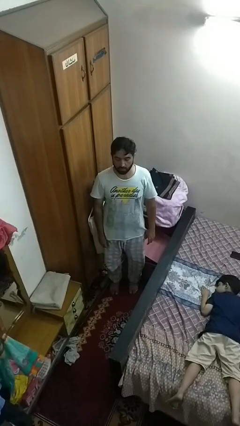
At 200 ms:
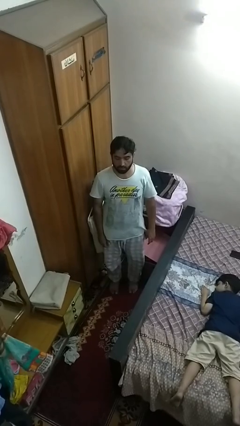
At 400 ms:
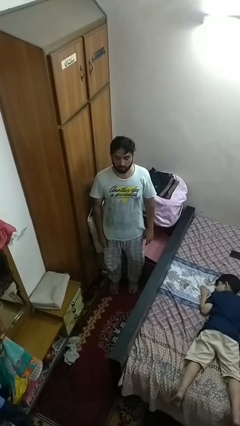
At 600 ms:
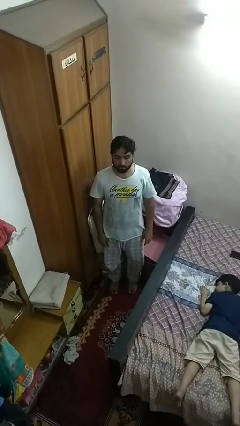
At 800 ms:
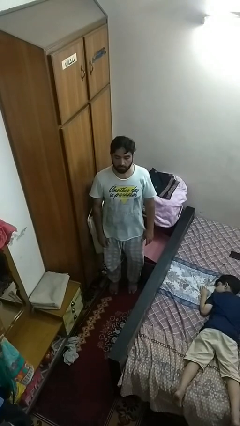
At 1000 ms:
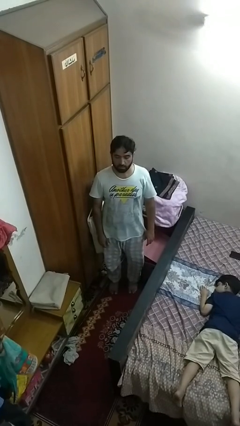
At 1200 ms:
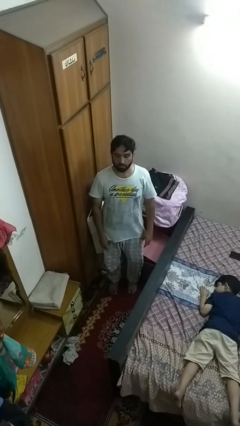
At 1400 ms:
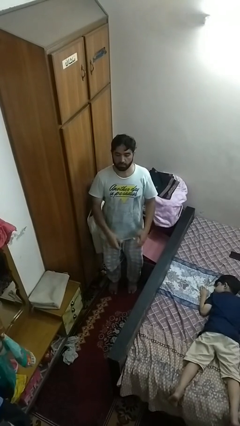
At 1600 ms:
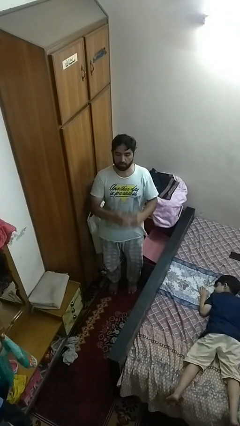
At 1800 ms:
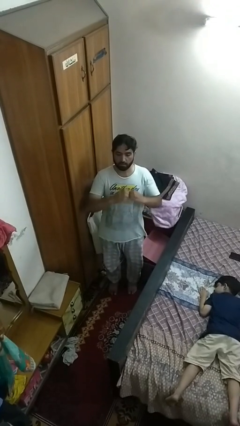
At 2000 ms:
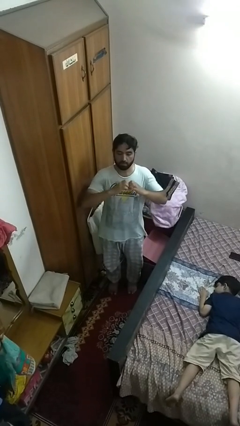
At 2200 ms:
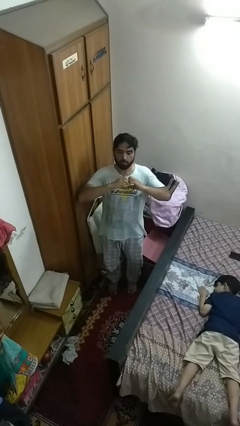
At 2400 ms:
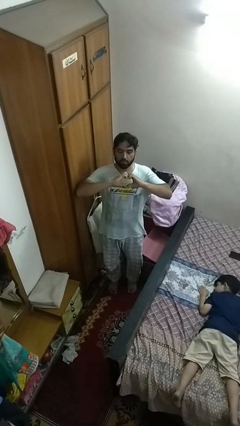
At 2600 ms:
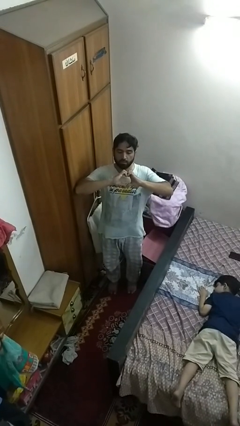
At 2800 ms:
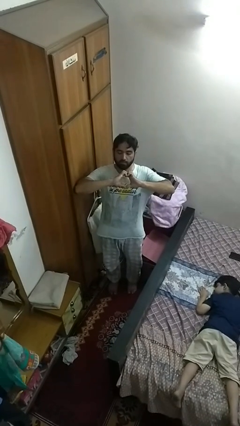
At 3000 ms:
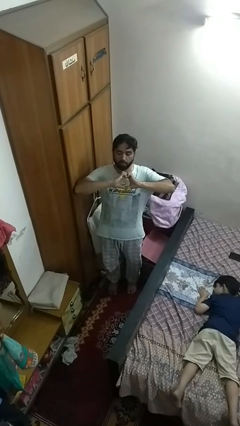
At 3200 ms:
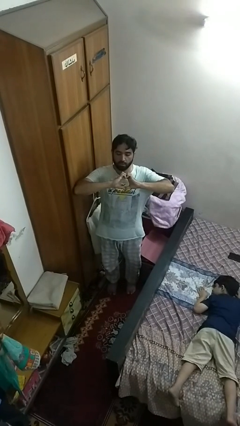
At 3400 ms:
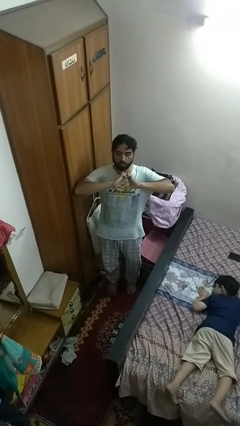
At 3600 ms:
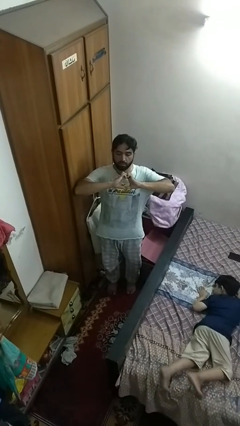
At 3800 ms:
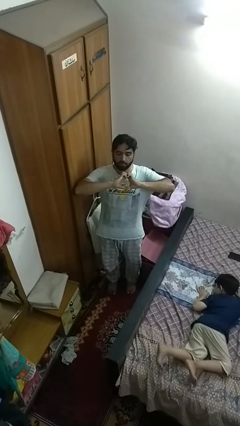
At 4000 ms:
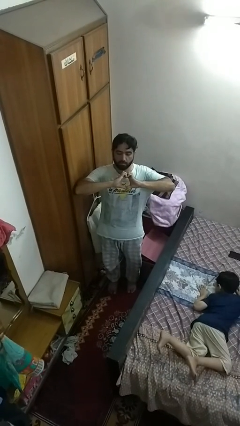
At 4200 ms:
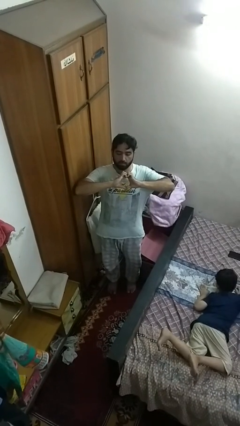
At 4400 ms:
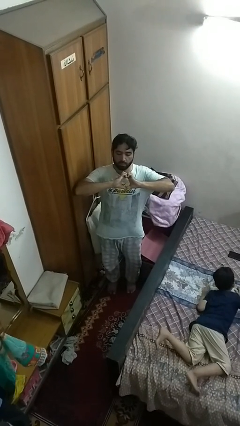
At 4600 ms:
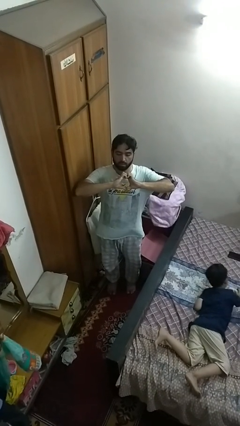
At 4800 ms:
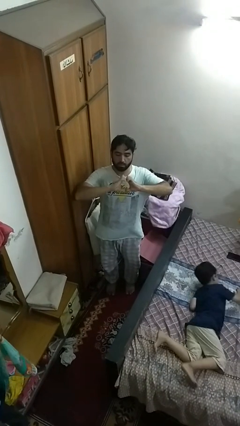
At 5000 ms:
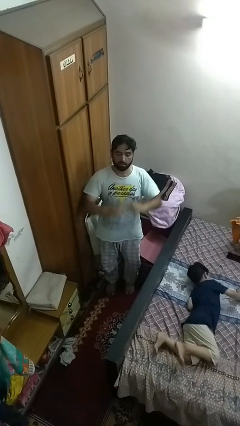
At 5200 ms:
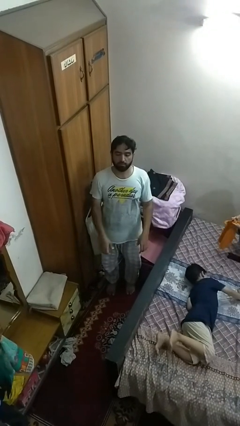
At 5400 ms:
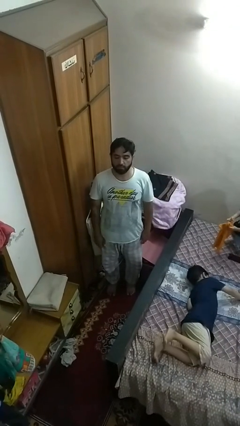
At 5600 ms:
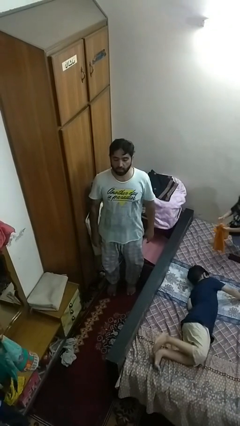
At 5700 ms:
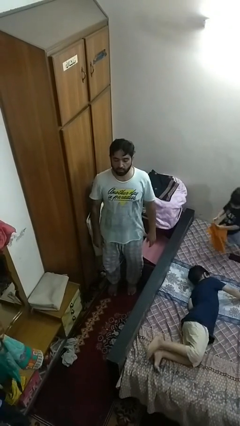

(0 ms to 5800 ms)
person gestures heart

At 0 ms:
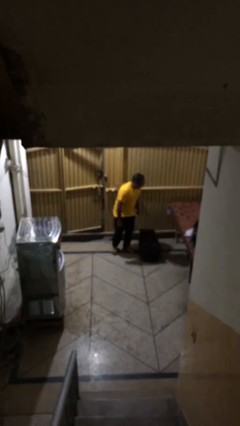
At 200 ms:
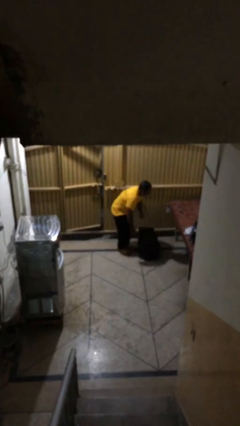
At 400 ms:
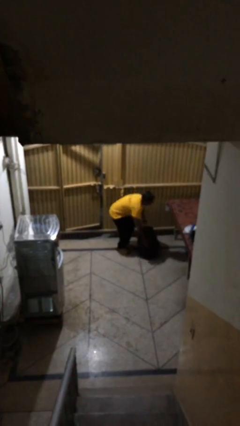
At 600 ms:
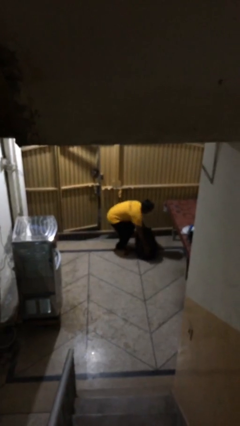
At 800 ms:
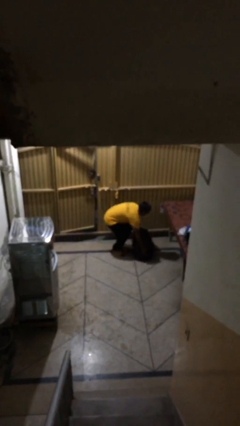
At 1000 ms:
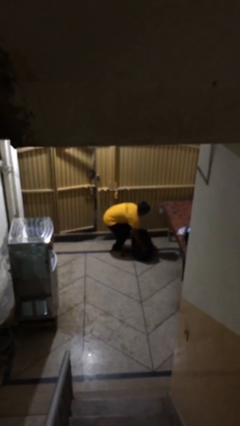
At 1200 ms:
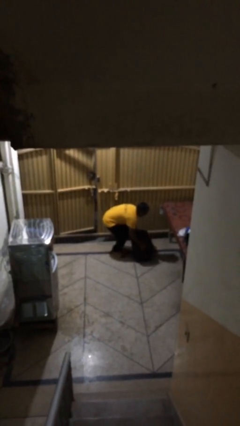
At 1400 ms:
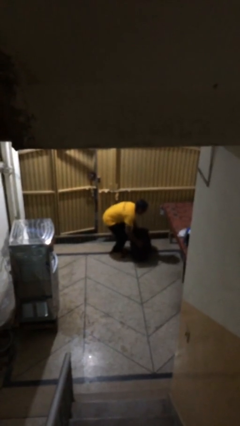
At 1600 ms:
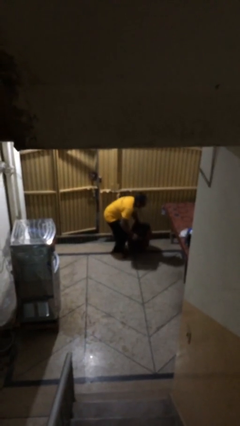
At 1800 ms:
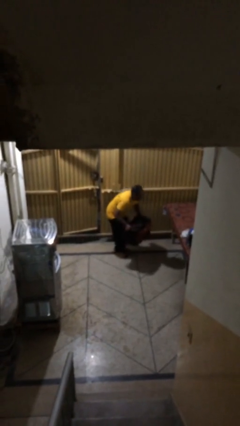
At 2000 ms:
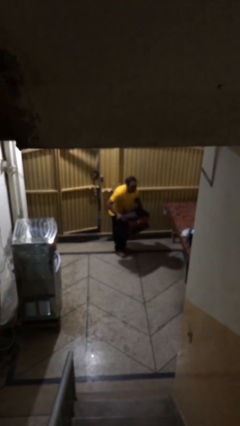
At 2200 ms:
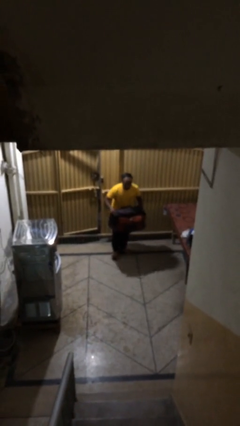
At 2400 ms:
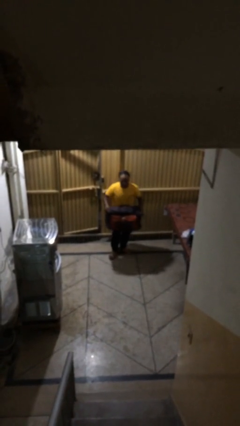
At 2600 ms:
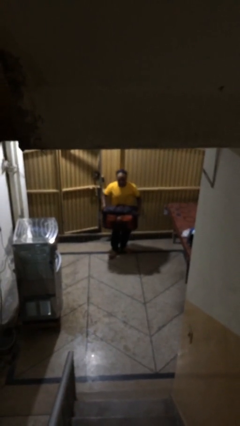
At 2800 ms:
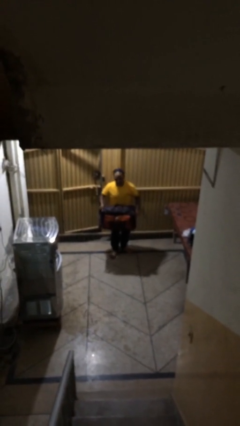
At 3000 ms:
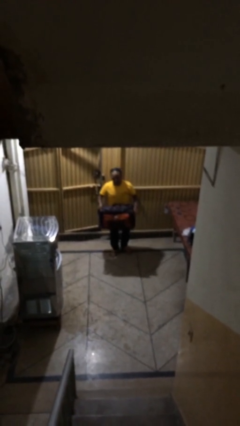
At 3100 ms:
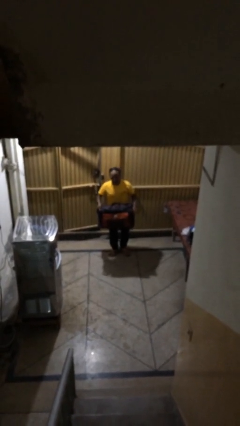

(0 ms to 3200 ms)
person picks up object from floor

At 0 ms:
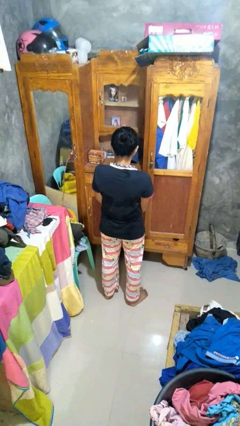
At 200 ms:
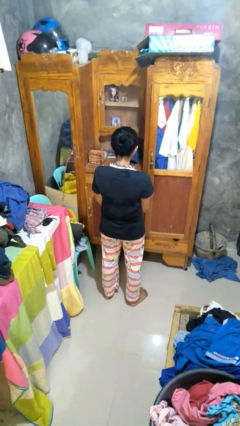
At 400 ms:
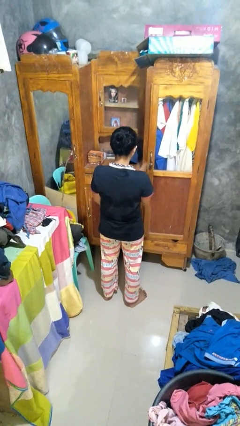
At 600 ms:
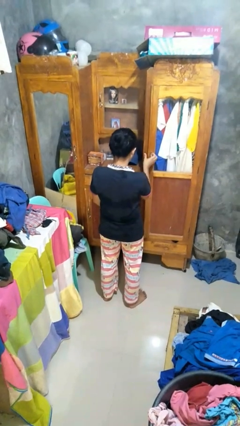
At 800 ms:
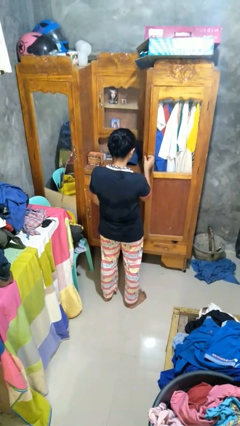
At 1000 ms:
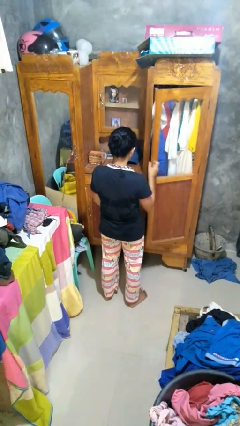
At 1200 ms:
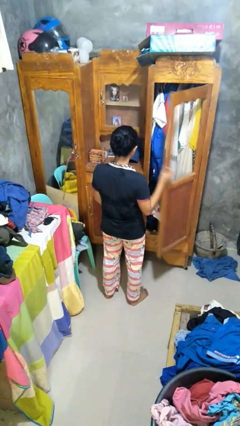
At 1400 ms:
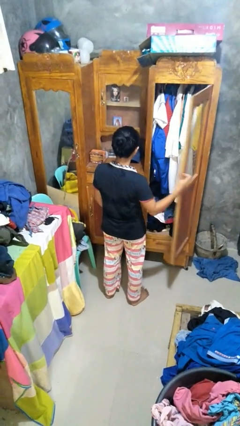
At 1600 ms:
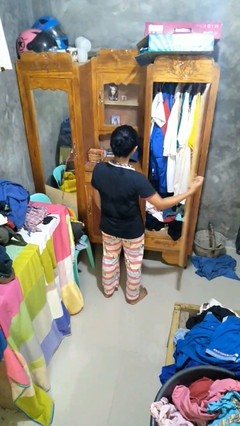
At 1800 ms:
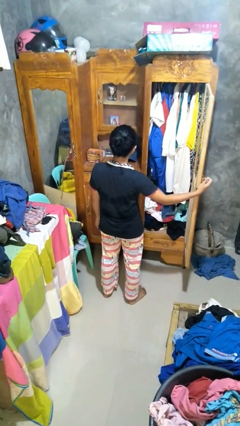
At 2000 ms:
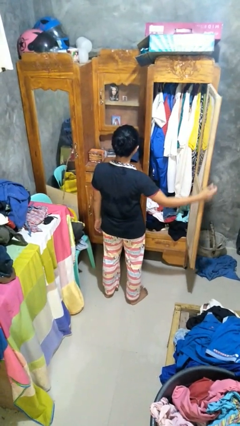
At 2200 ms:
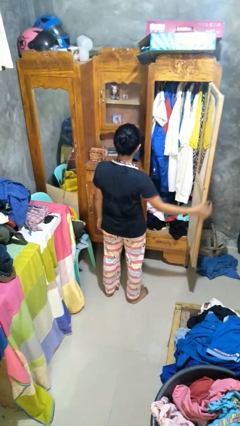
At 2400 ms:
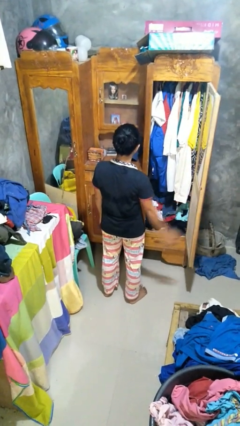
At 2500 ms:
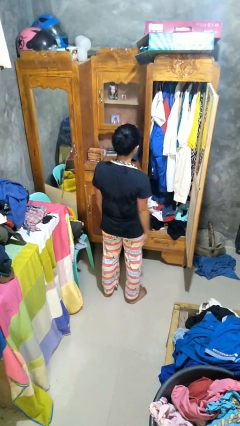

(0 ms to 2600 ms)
person opens closet door

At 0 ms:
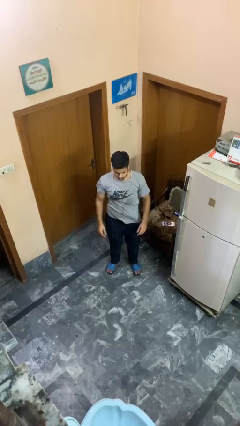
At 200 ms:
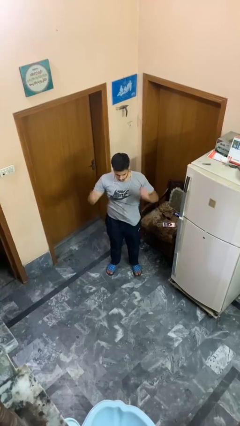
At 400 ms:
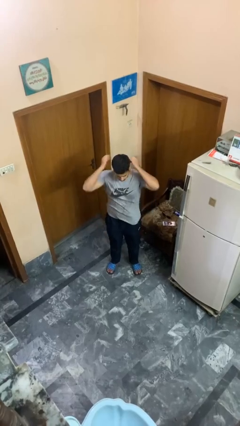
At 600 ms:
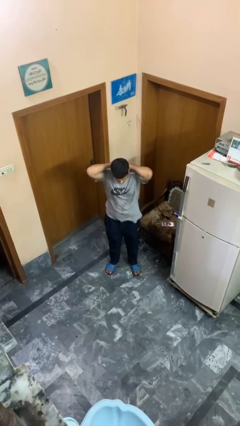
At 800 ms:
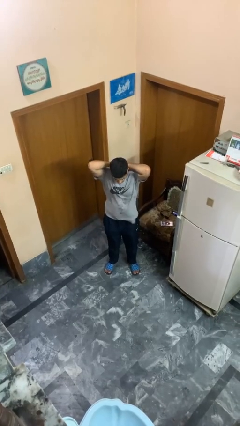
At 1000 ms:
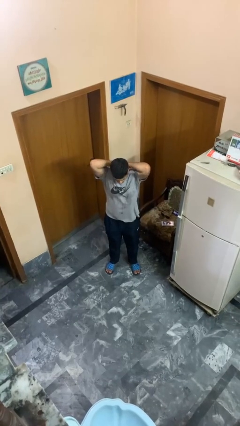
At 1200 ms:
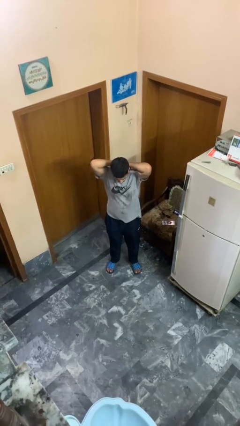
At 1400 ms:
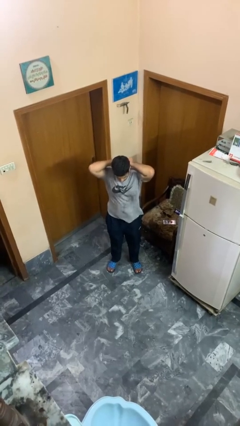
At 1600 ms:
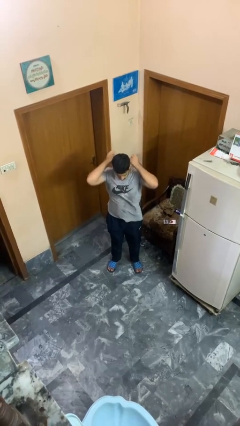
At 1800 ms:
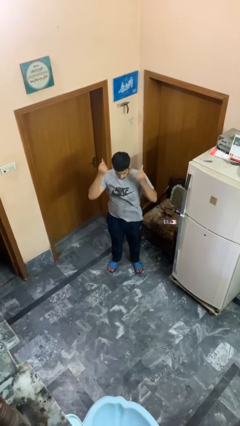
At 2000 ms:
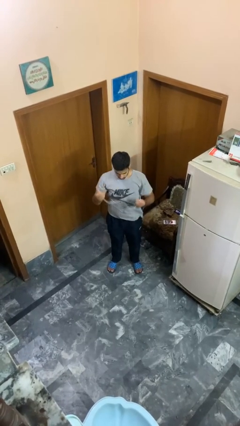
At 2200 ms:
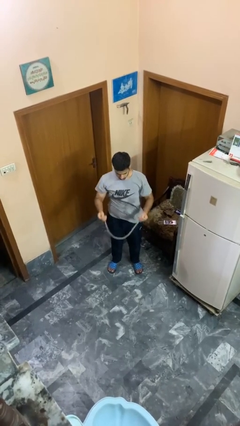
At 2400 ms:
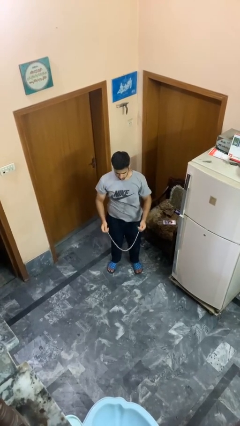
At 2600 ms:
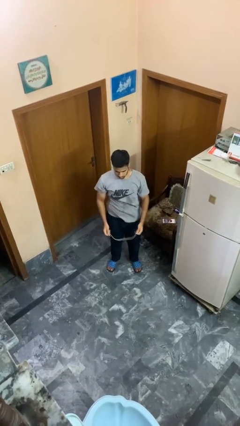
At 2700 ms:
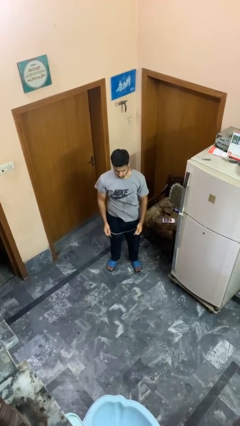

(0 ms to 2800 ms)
person takes off necklace

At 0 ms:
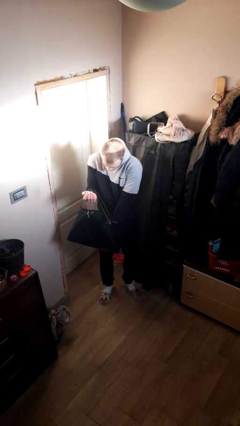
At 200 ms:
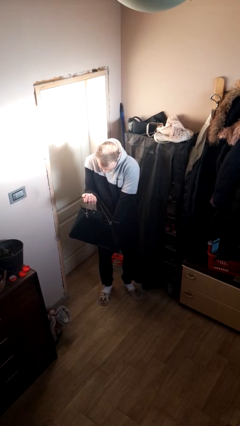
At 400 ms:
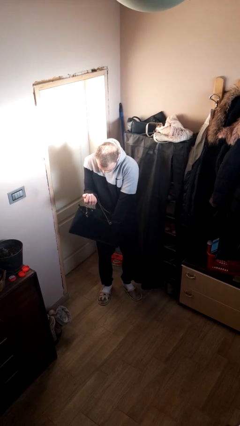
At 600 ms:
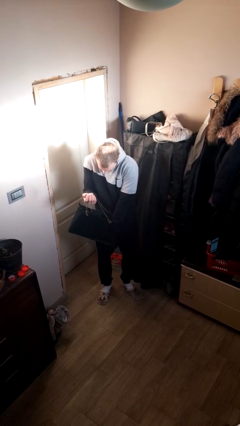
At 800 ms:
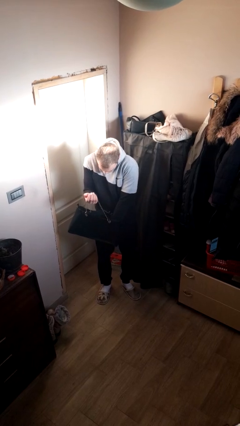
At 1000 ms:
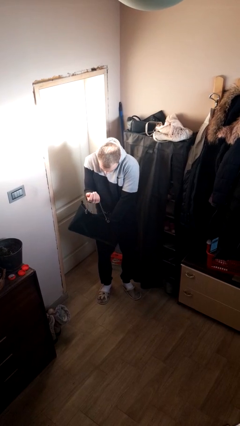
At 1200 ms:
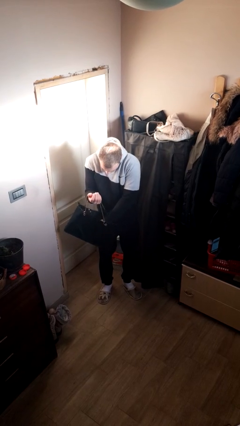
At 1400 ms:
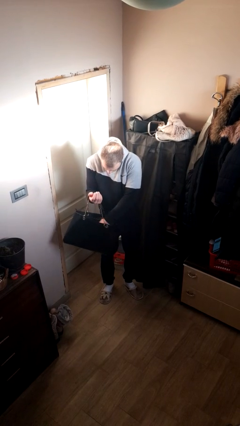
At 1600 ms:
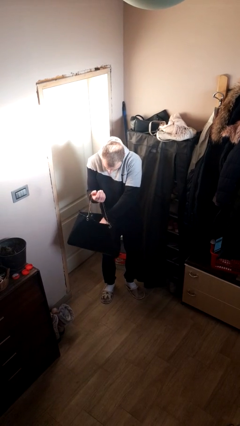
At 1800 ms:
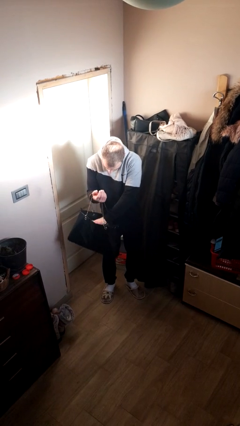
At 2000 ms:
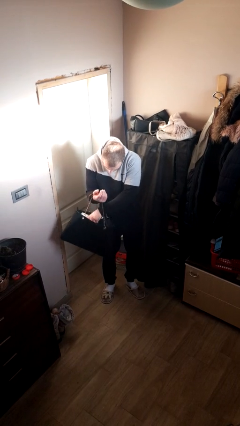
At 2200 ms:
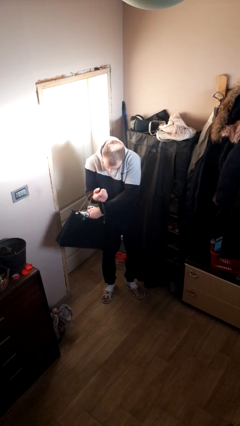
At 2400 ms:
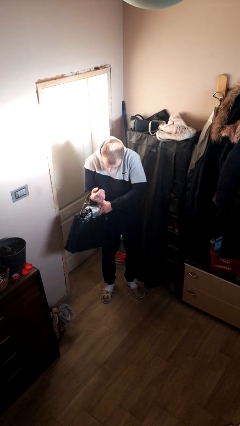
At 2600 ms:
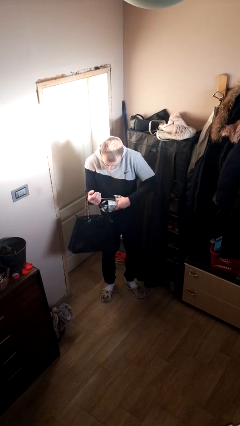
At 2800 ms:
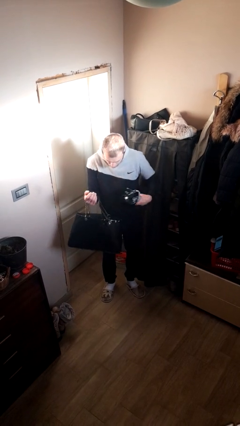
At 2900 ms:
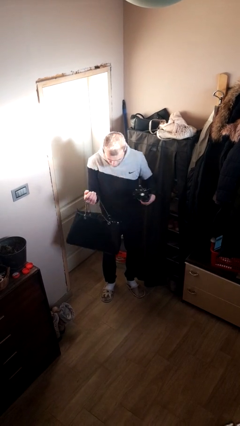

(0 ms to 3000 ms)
person searches in purse
